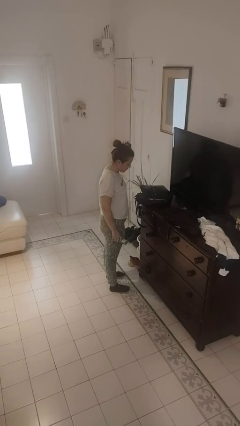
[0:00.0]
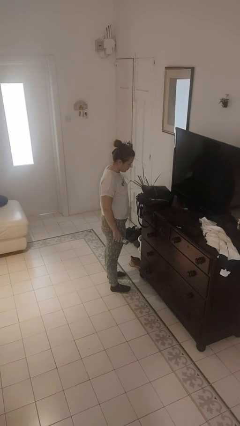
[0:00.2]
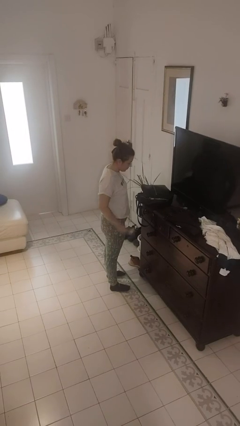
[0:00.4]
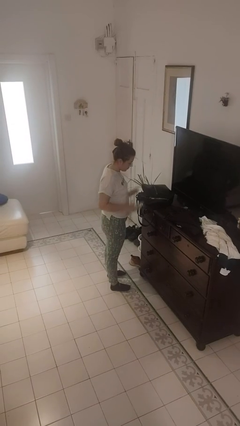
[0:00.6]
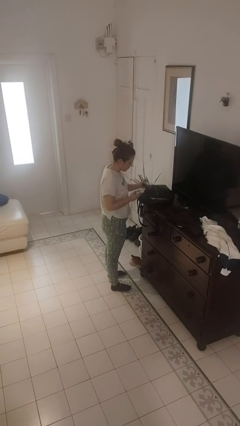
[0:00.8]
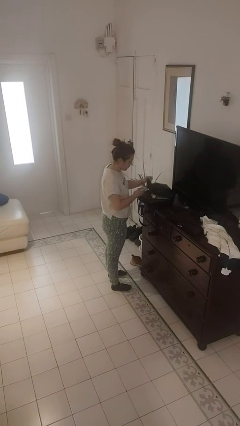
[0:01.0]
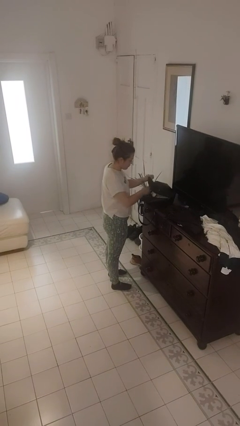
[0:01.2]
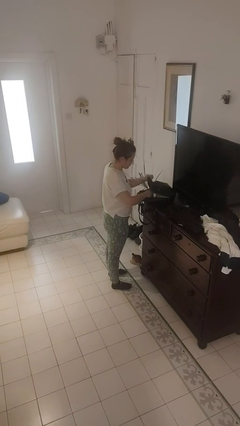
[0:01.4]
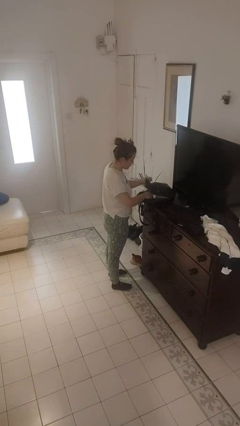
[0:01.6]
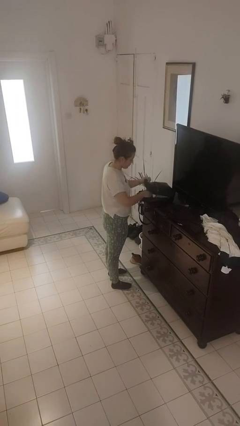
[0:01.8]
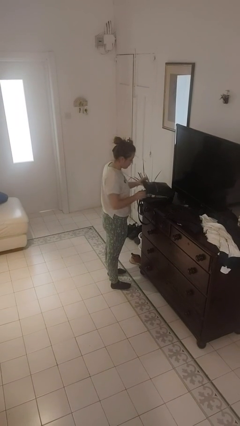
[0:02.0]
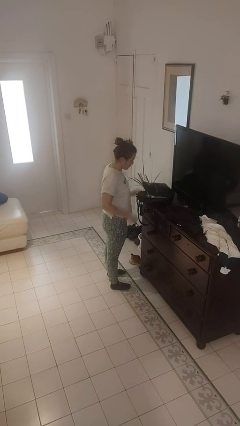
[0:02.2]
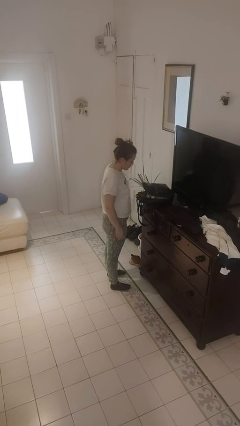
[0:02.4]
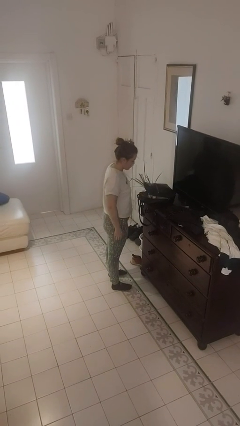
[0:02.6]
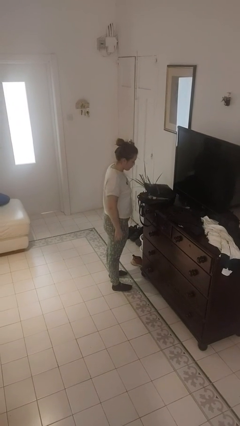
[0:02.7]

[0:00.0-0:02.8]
person puts object into purse

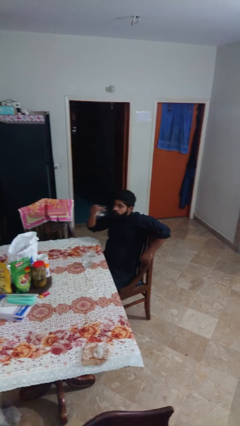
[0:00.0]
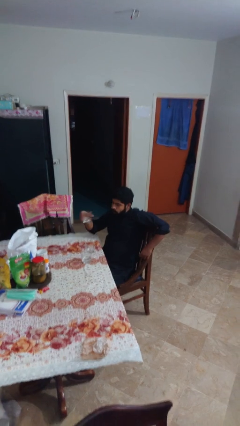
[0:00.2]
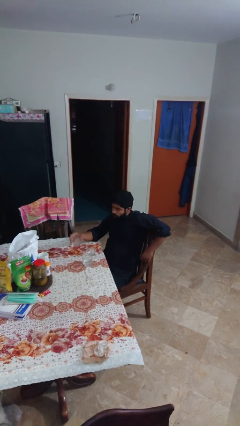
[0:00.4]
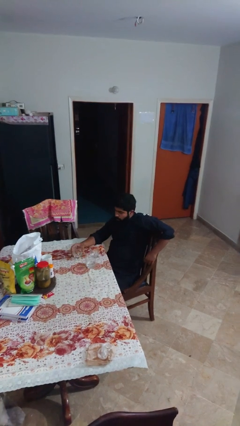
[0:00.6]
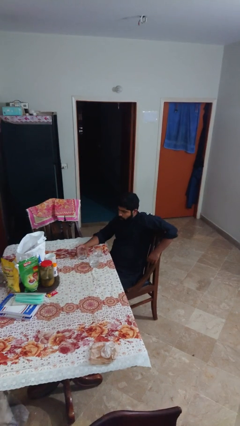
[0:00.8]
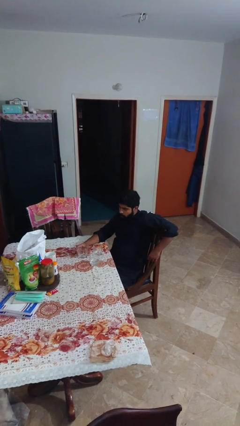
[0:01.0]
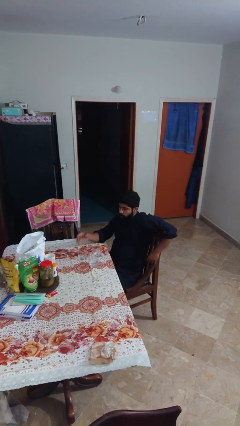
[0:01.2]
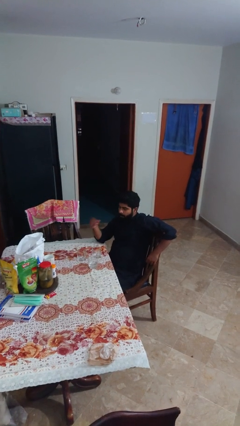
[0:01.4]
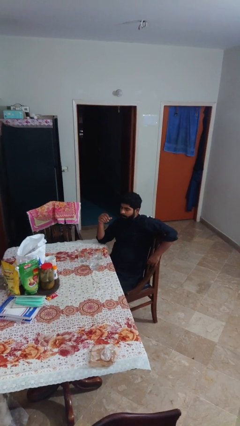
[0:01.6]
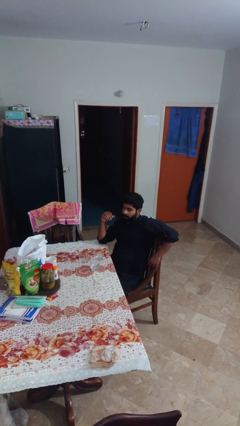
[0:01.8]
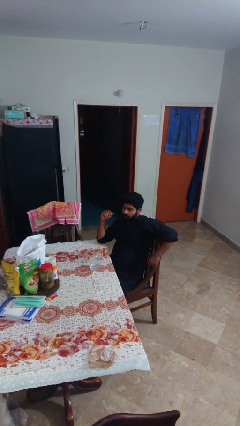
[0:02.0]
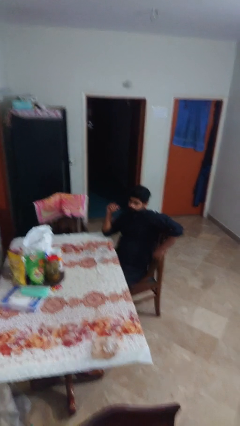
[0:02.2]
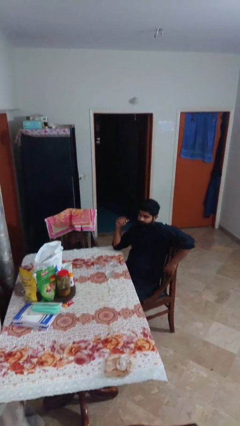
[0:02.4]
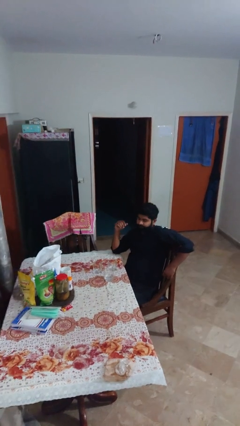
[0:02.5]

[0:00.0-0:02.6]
person puts down object on table

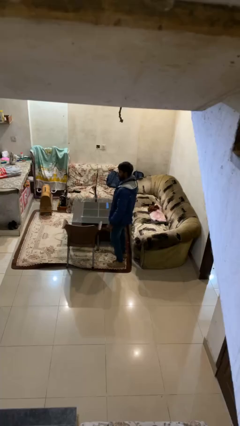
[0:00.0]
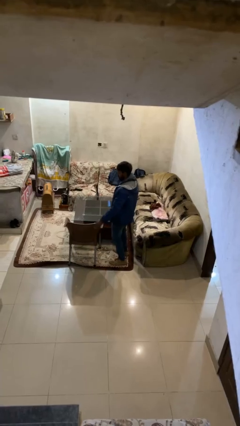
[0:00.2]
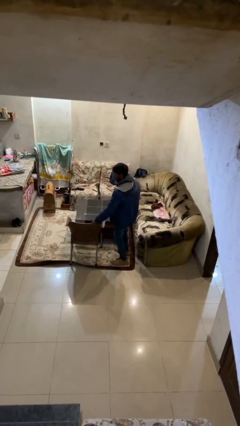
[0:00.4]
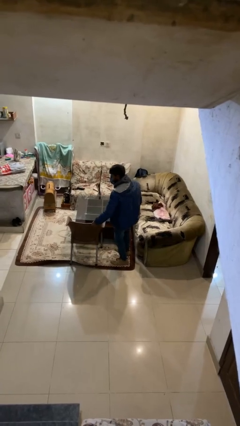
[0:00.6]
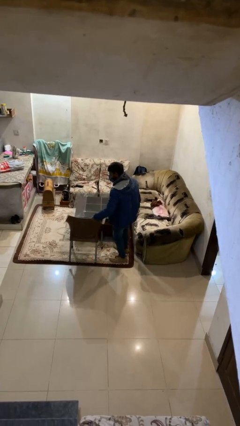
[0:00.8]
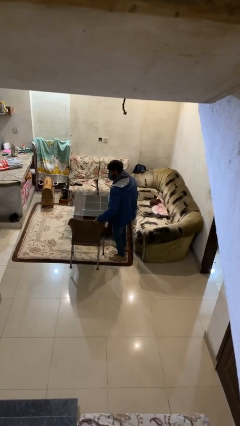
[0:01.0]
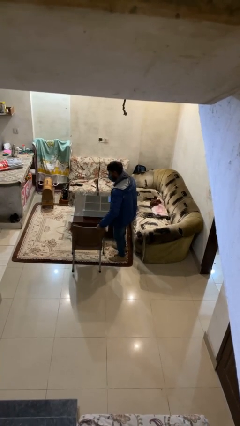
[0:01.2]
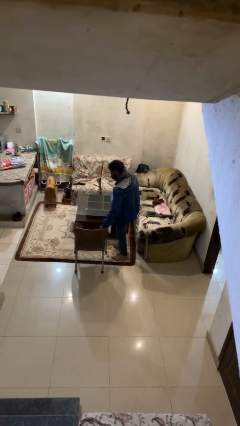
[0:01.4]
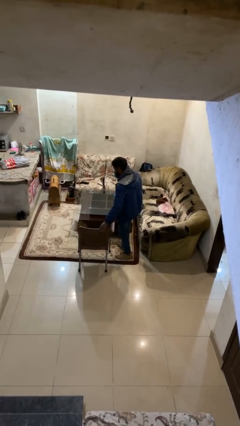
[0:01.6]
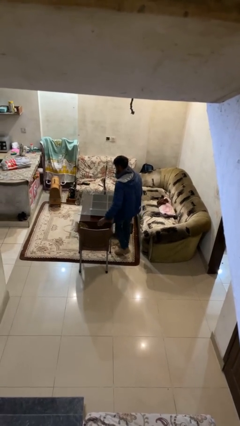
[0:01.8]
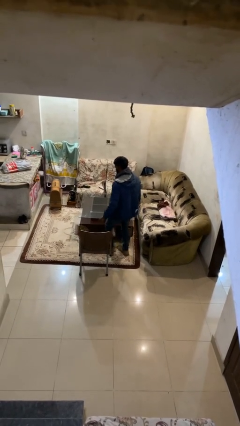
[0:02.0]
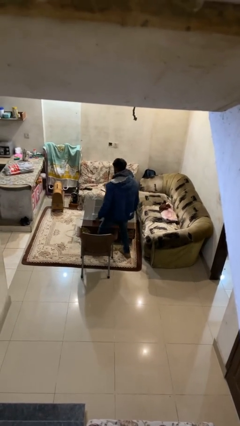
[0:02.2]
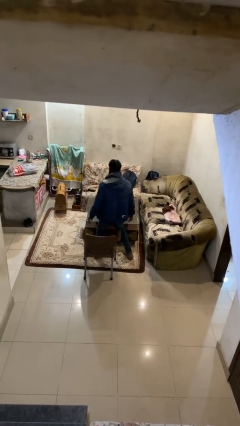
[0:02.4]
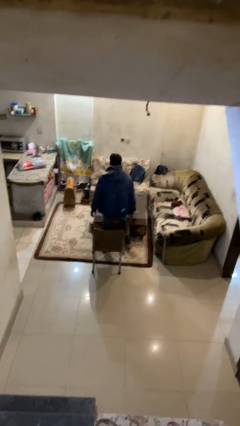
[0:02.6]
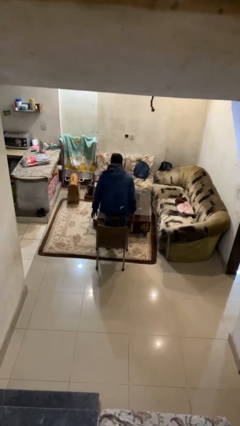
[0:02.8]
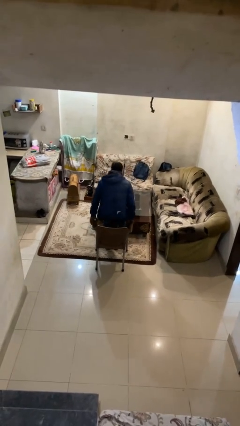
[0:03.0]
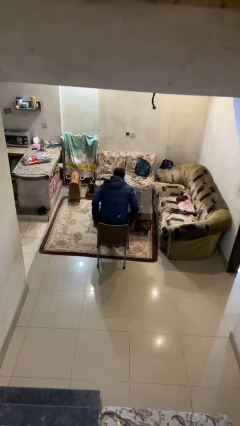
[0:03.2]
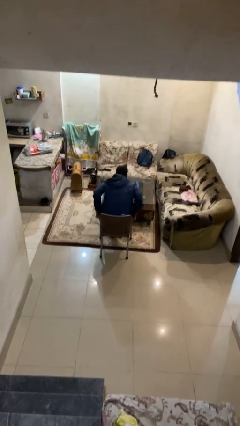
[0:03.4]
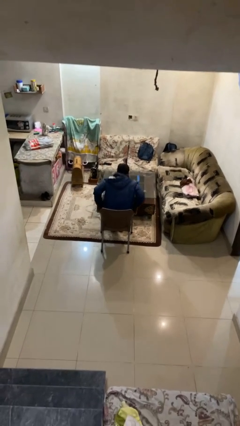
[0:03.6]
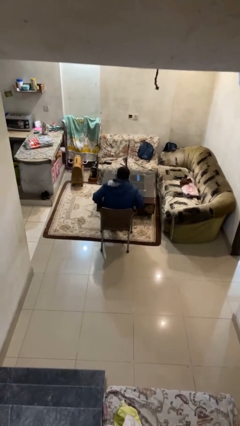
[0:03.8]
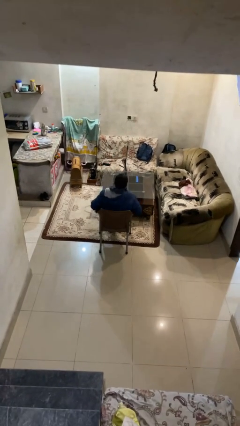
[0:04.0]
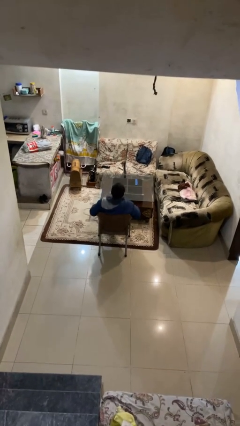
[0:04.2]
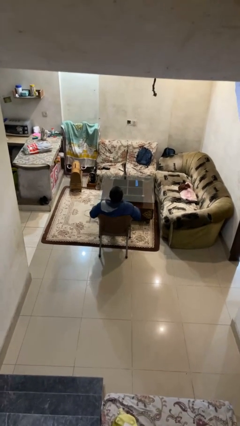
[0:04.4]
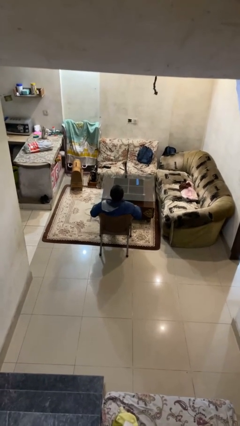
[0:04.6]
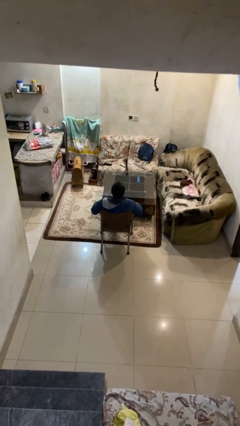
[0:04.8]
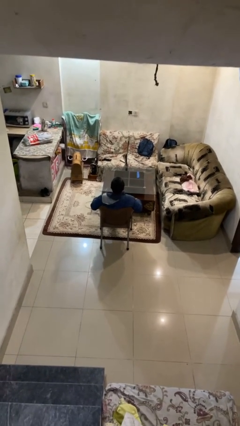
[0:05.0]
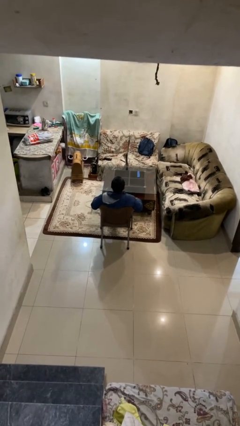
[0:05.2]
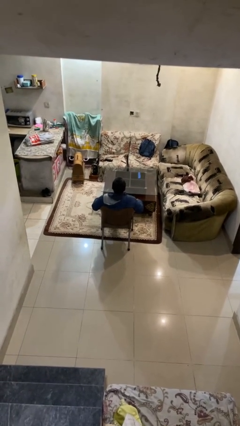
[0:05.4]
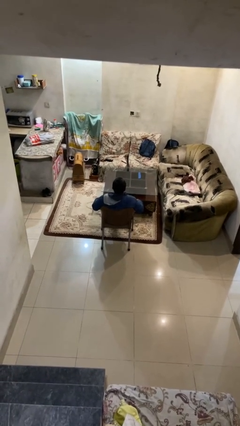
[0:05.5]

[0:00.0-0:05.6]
person sits down

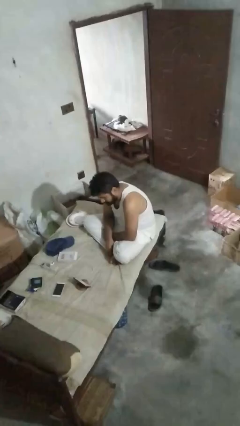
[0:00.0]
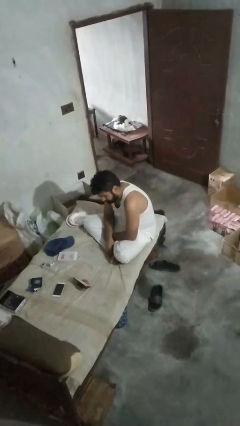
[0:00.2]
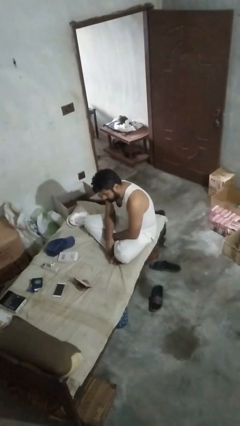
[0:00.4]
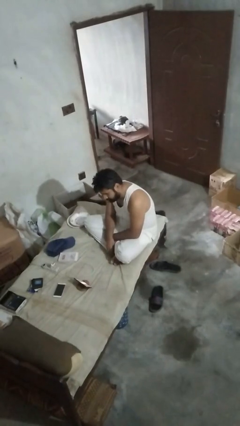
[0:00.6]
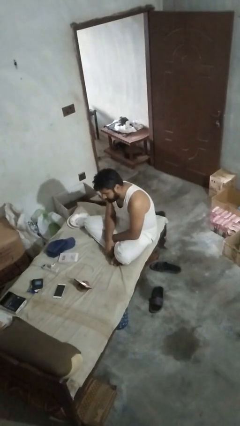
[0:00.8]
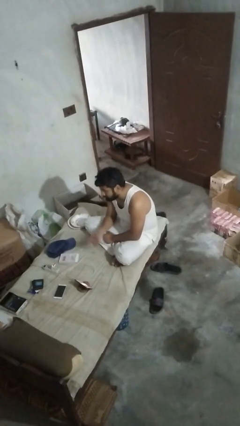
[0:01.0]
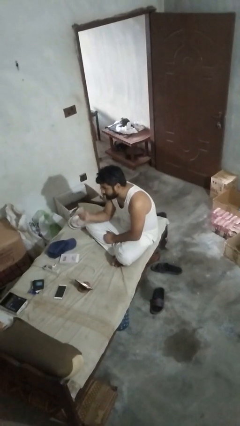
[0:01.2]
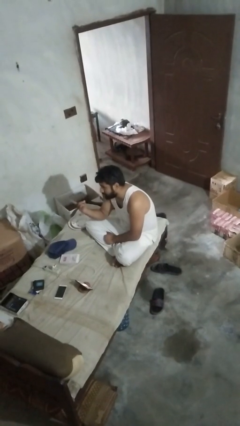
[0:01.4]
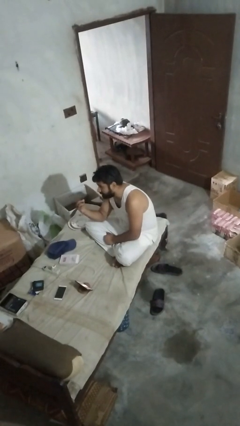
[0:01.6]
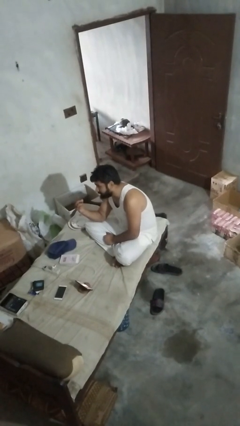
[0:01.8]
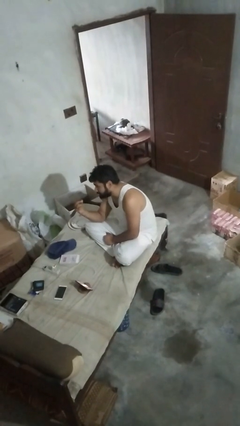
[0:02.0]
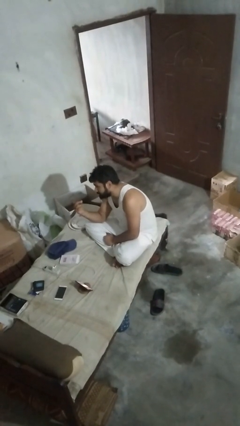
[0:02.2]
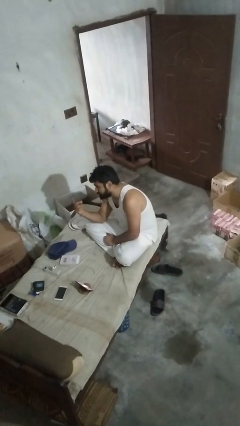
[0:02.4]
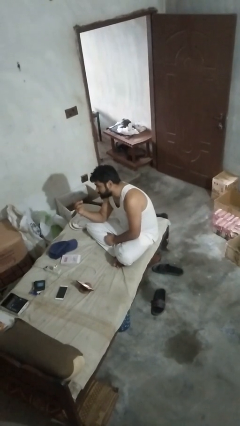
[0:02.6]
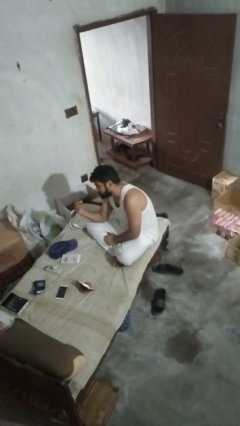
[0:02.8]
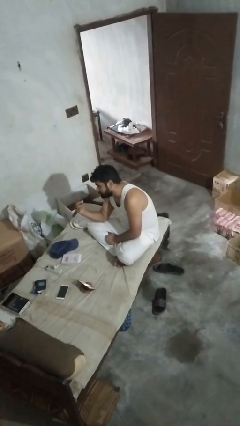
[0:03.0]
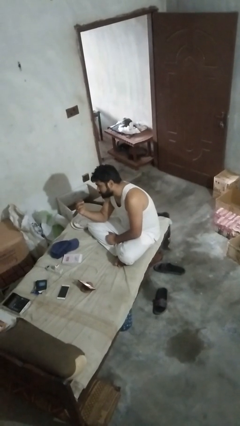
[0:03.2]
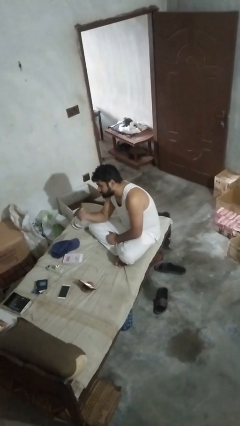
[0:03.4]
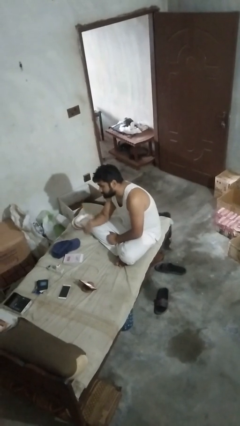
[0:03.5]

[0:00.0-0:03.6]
person gestures come here

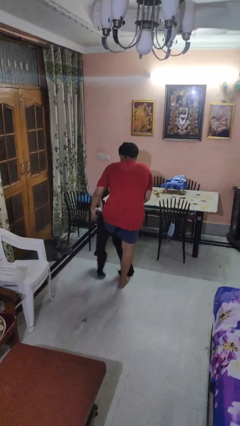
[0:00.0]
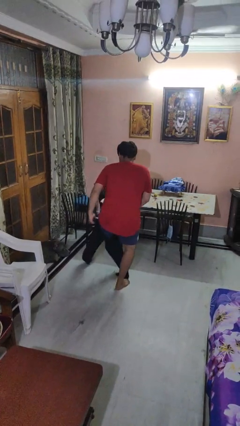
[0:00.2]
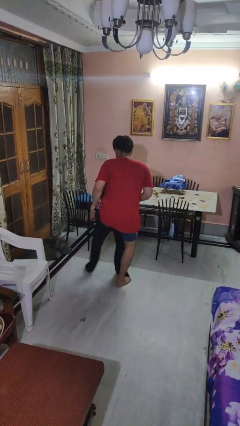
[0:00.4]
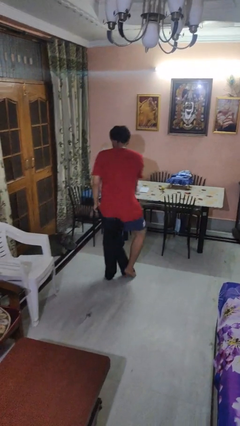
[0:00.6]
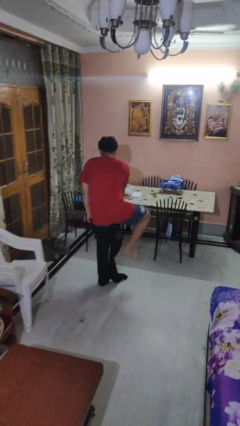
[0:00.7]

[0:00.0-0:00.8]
person takes off pants

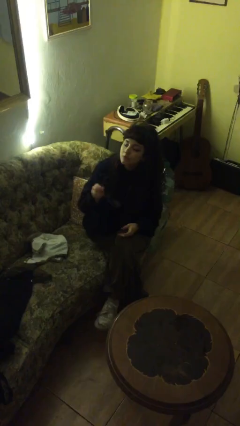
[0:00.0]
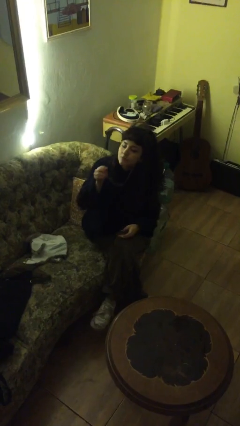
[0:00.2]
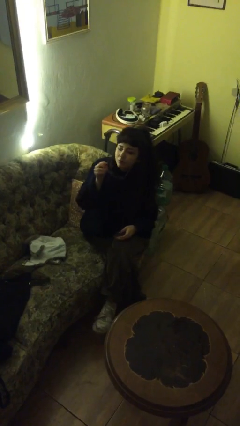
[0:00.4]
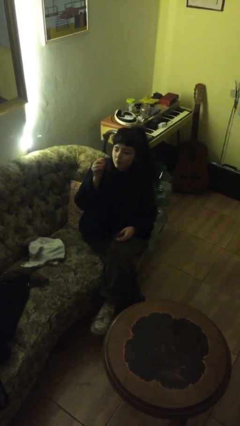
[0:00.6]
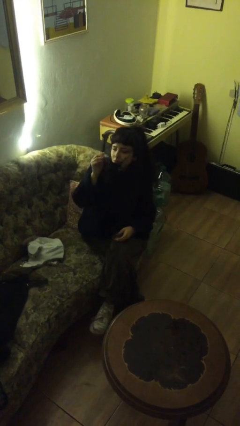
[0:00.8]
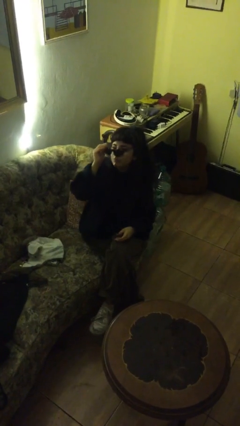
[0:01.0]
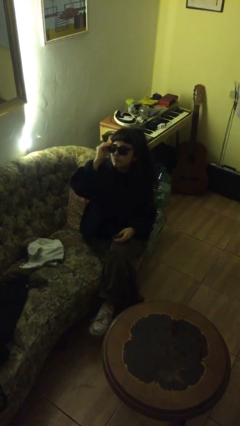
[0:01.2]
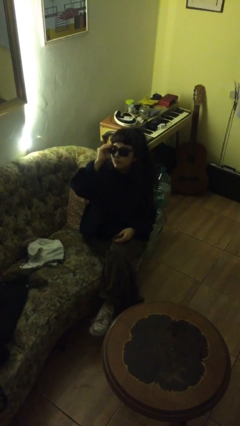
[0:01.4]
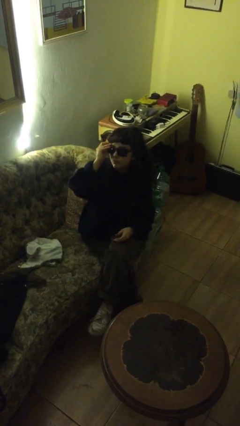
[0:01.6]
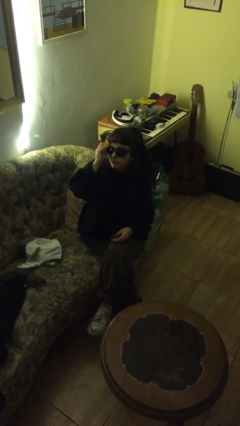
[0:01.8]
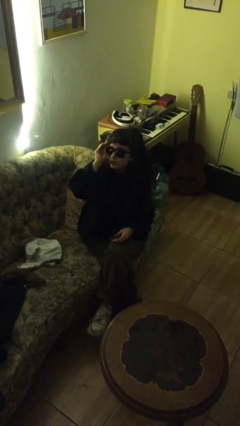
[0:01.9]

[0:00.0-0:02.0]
person puts on sunglasses
